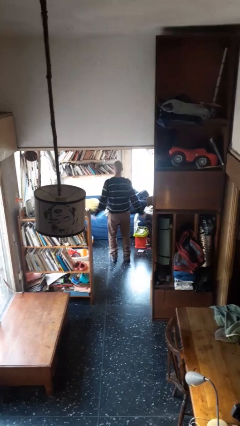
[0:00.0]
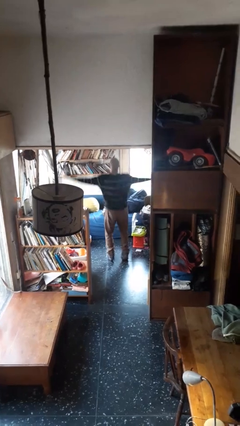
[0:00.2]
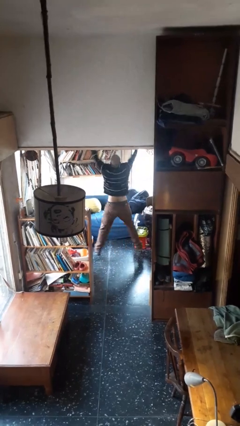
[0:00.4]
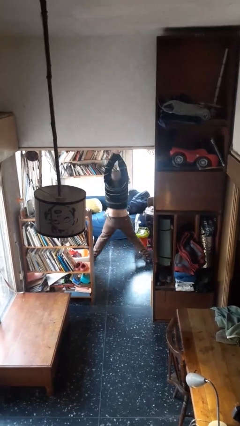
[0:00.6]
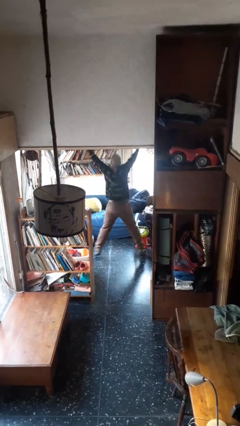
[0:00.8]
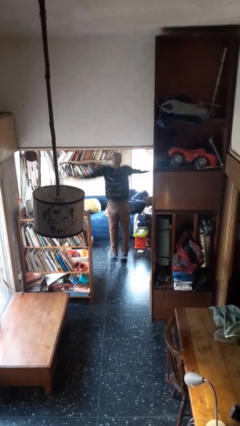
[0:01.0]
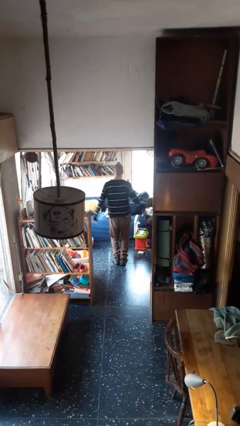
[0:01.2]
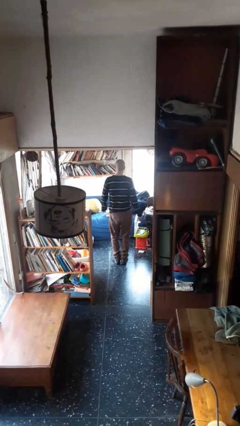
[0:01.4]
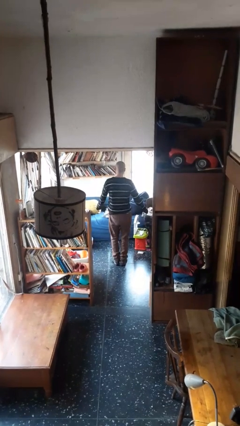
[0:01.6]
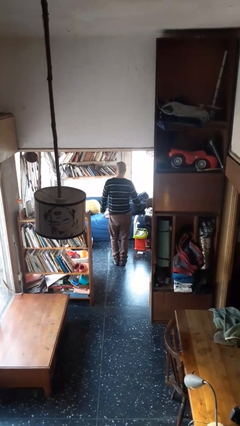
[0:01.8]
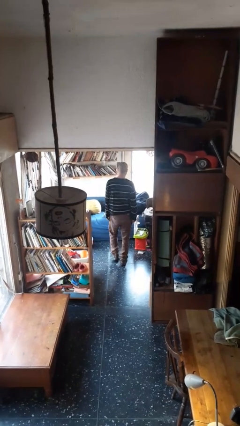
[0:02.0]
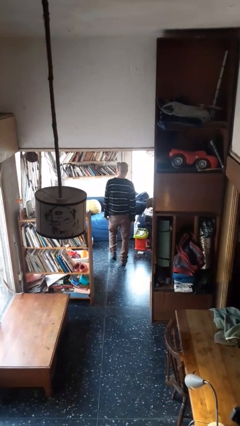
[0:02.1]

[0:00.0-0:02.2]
person exercises with jumping jacks

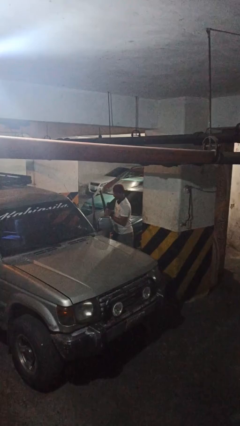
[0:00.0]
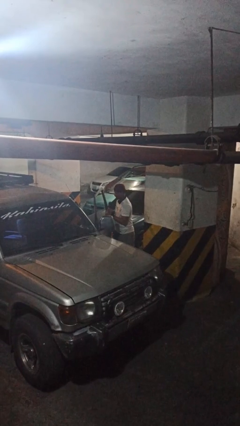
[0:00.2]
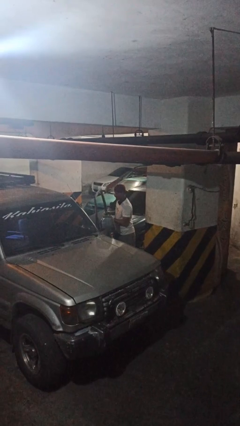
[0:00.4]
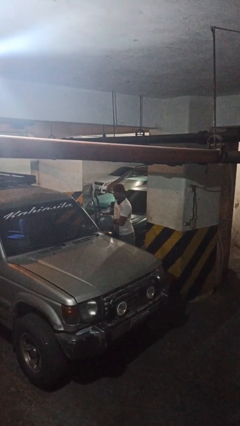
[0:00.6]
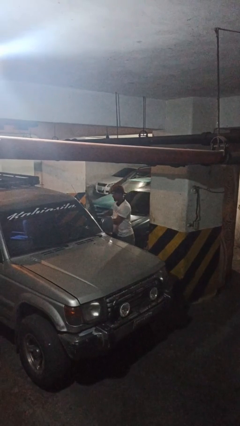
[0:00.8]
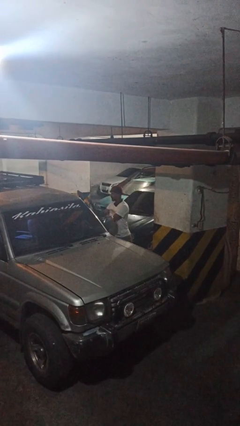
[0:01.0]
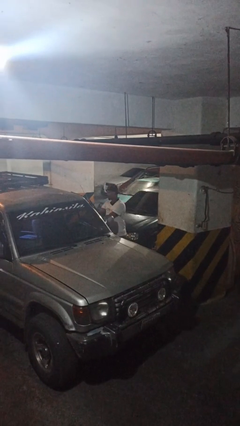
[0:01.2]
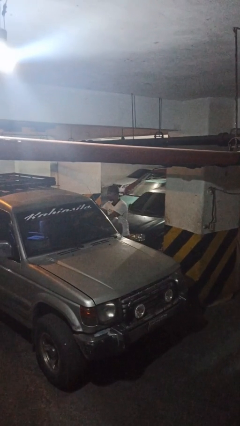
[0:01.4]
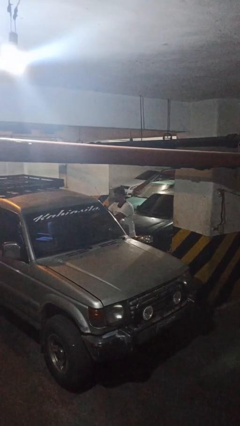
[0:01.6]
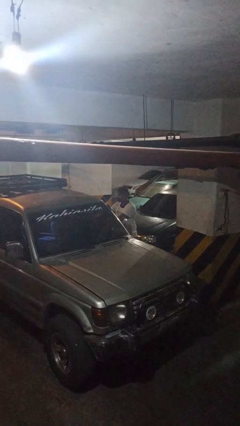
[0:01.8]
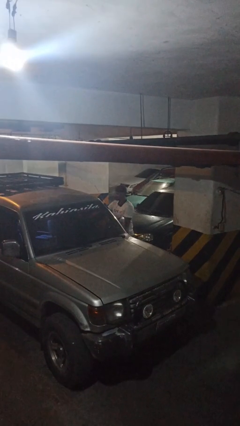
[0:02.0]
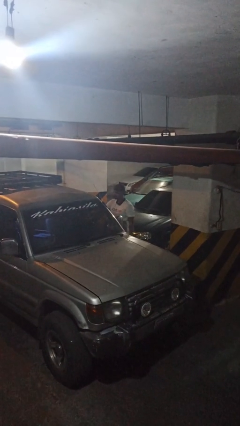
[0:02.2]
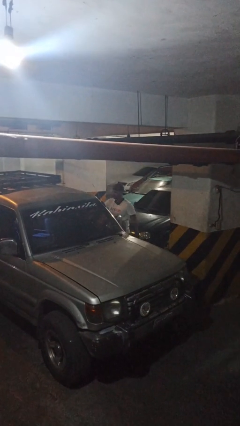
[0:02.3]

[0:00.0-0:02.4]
person closes car door

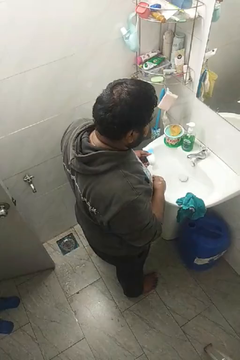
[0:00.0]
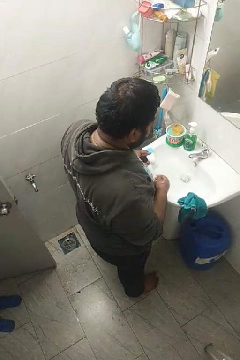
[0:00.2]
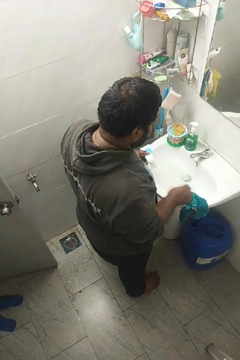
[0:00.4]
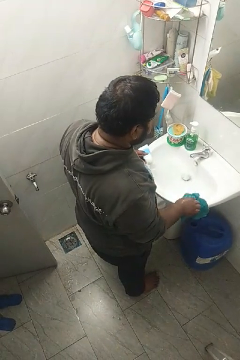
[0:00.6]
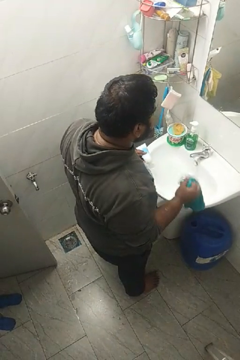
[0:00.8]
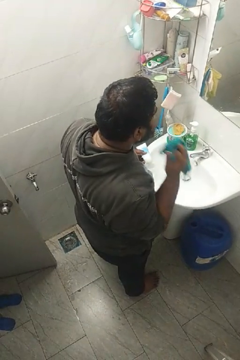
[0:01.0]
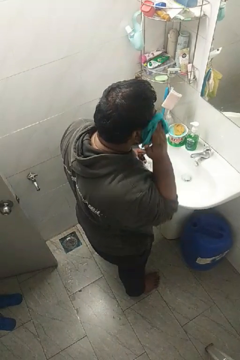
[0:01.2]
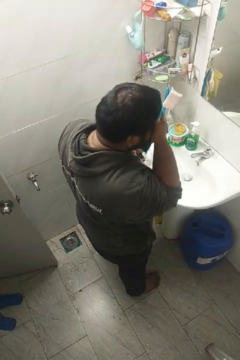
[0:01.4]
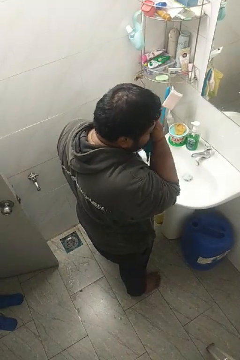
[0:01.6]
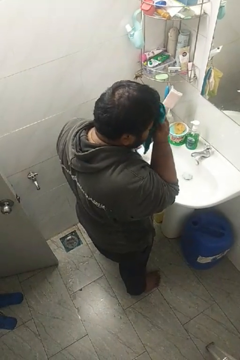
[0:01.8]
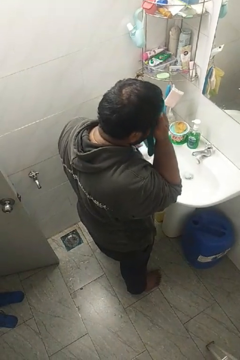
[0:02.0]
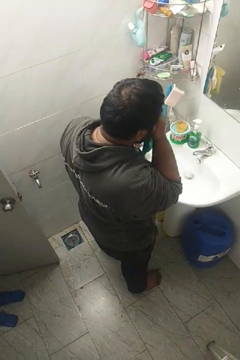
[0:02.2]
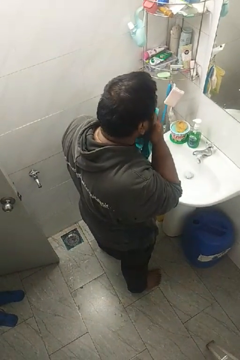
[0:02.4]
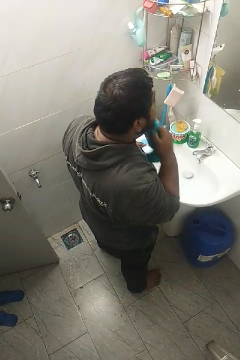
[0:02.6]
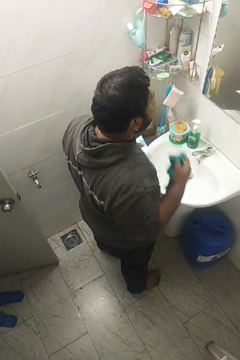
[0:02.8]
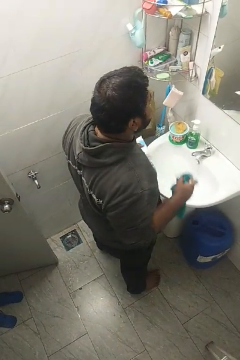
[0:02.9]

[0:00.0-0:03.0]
person dries face with towel

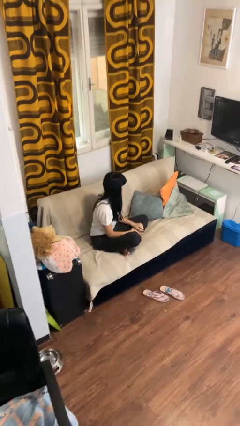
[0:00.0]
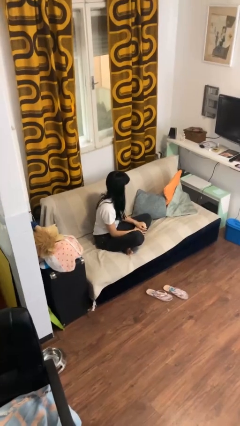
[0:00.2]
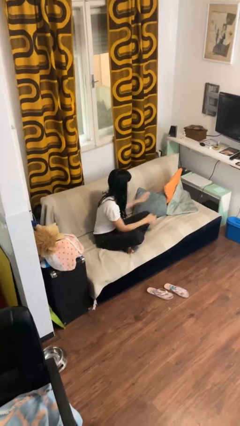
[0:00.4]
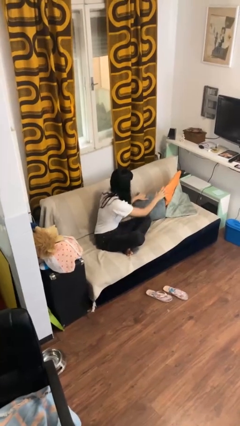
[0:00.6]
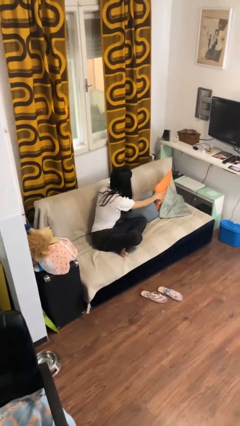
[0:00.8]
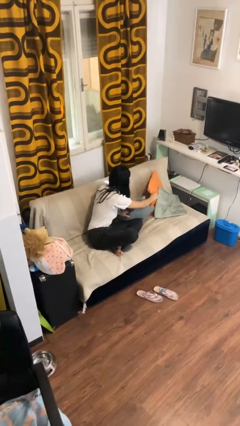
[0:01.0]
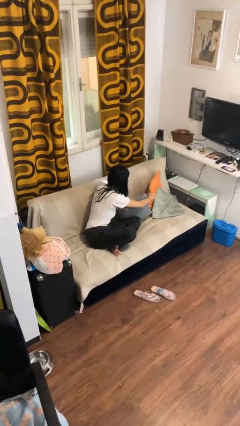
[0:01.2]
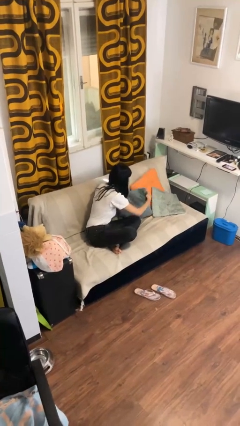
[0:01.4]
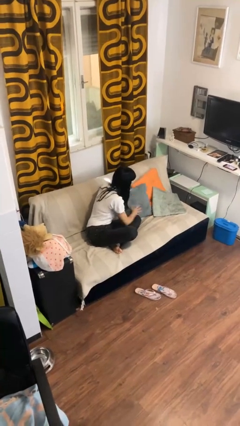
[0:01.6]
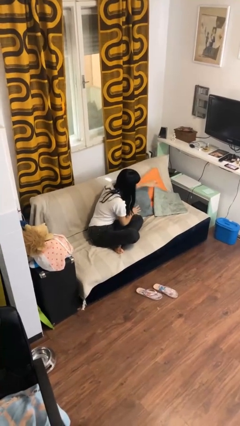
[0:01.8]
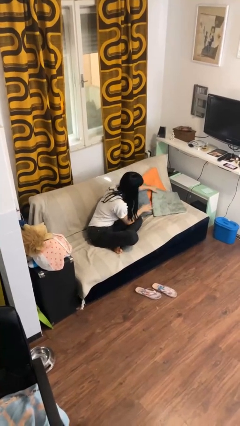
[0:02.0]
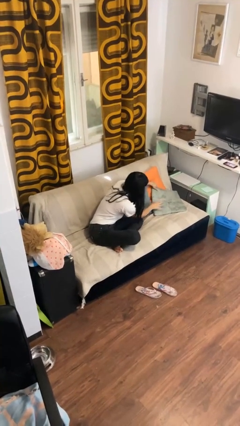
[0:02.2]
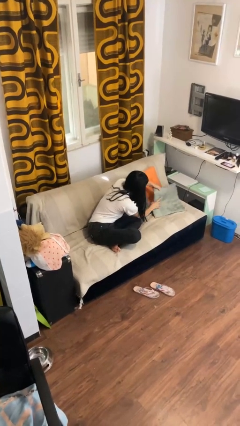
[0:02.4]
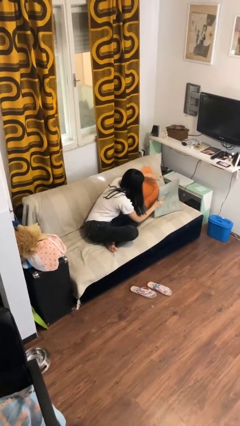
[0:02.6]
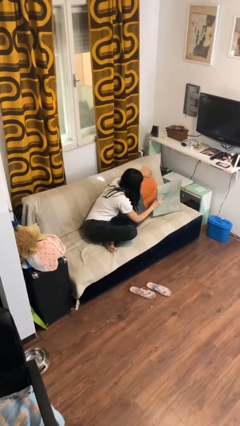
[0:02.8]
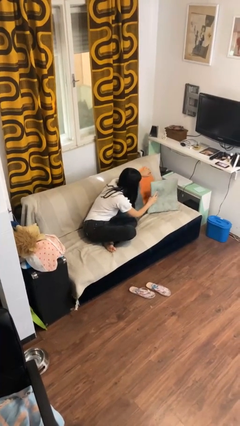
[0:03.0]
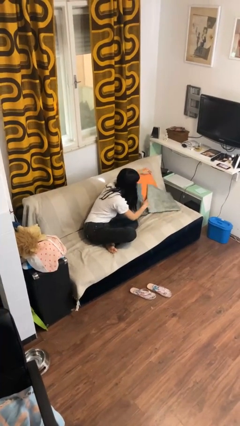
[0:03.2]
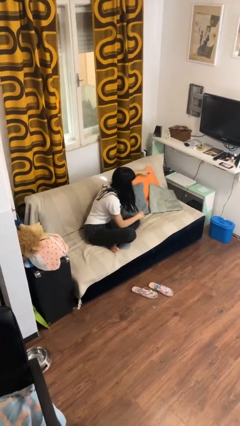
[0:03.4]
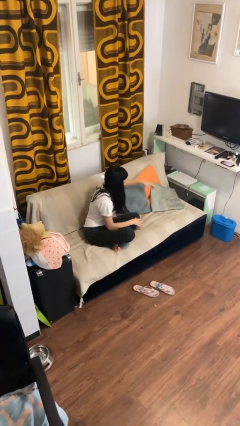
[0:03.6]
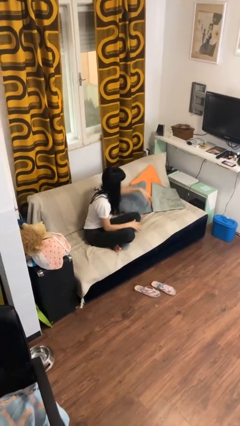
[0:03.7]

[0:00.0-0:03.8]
person searches in couch

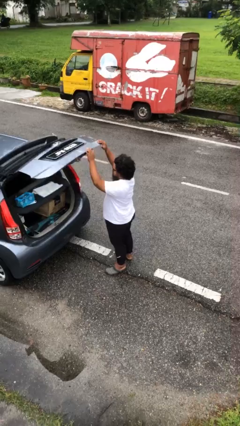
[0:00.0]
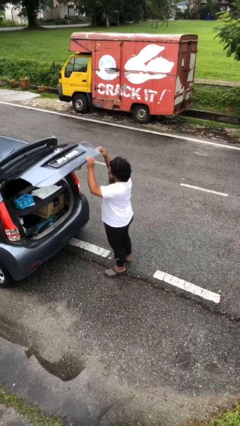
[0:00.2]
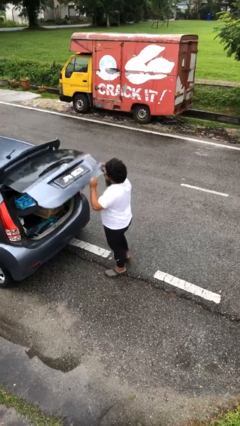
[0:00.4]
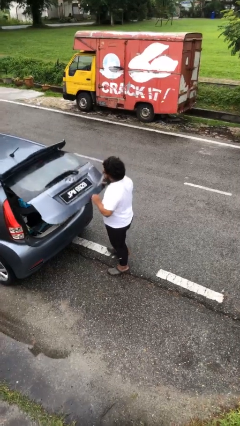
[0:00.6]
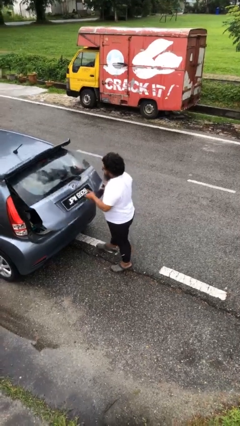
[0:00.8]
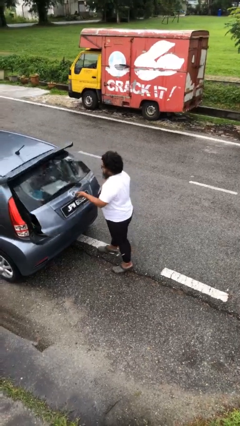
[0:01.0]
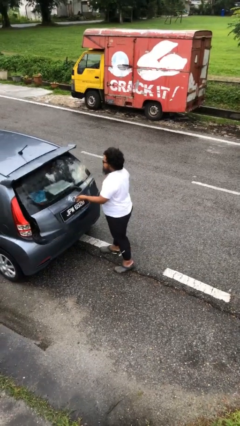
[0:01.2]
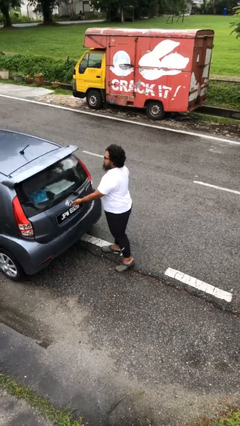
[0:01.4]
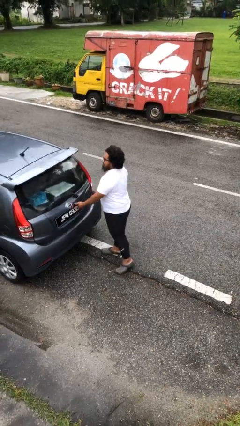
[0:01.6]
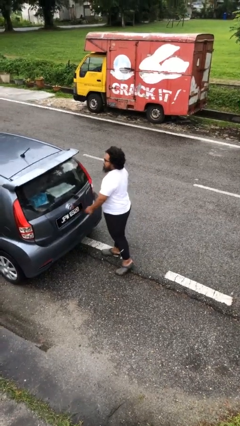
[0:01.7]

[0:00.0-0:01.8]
person closes car trunk

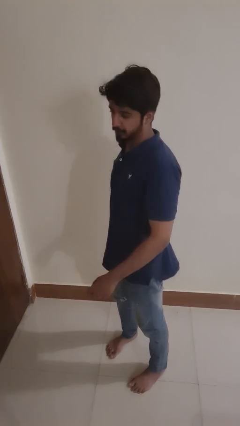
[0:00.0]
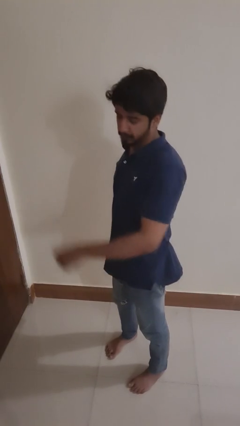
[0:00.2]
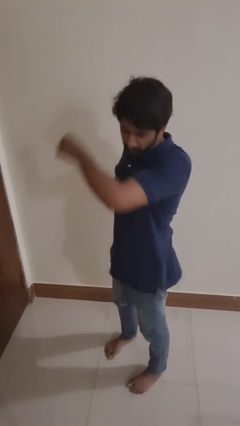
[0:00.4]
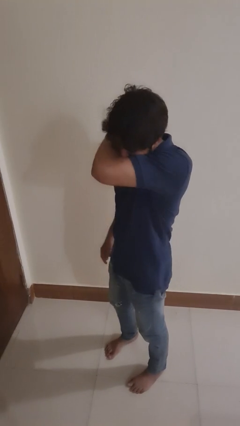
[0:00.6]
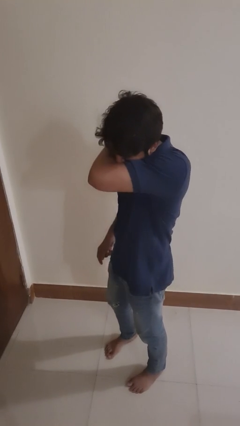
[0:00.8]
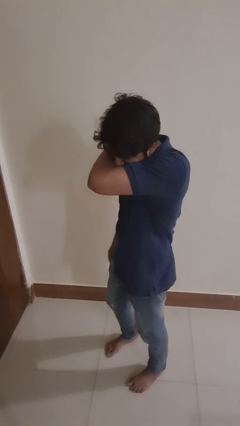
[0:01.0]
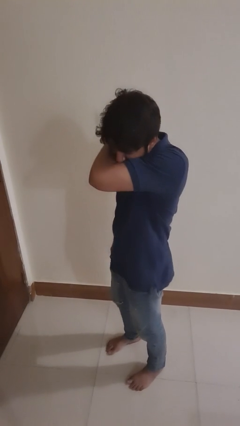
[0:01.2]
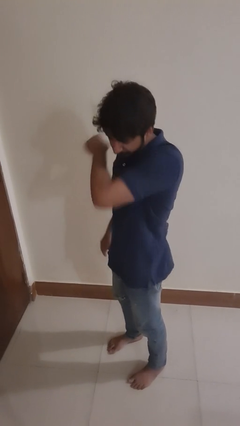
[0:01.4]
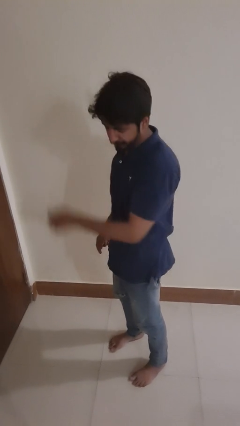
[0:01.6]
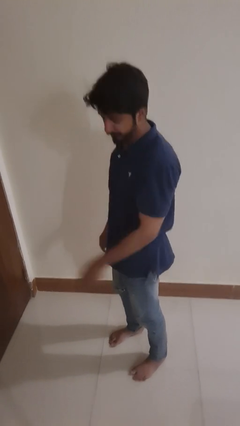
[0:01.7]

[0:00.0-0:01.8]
person sneezes into arm

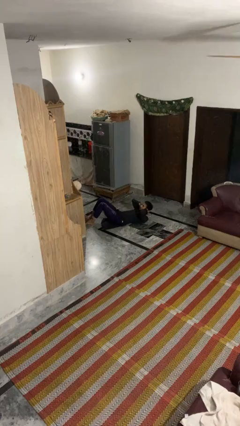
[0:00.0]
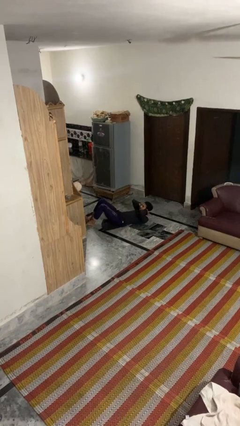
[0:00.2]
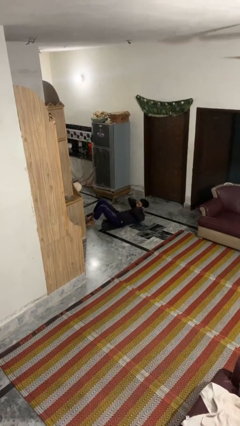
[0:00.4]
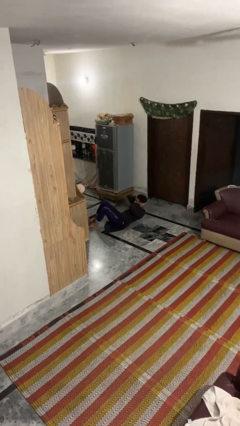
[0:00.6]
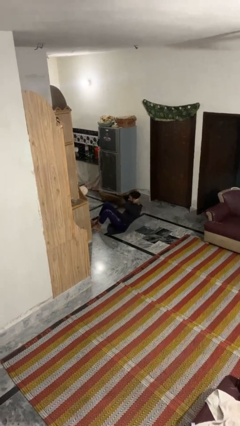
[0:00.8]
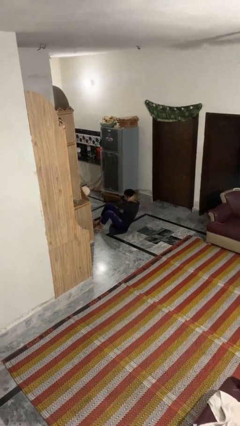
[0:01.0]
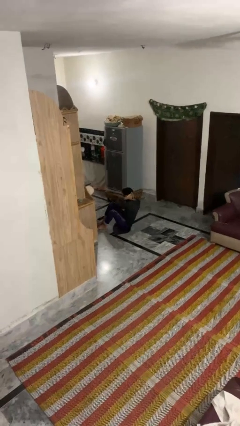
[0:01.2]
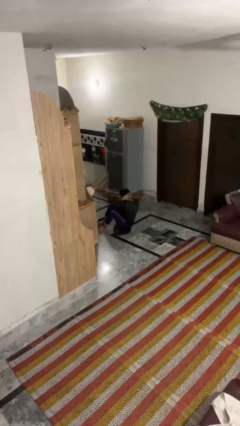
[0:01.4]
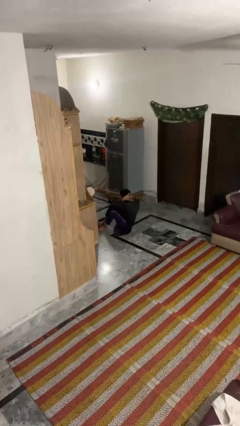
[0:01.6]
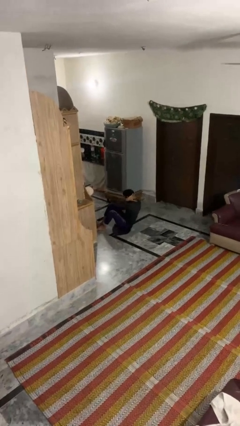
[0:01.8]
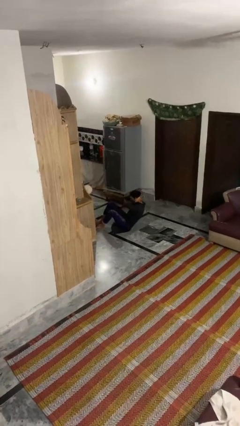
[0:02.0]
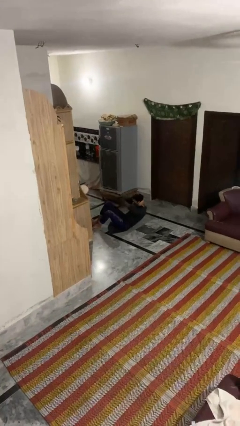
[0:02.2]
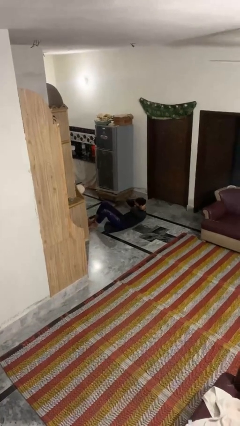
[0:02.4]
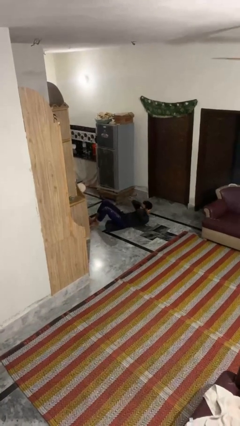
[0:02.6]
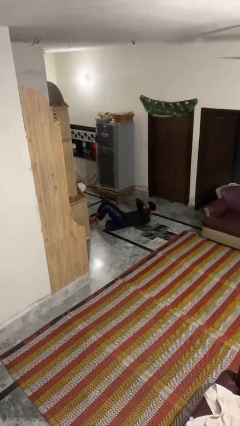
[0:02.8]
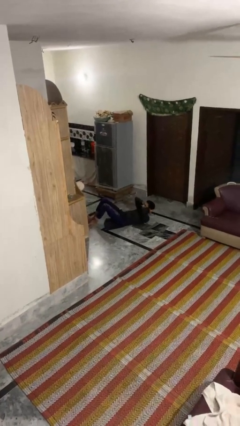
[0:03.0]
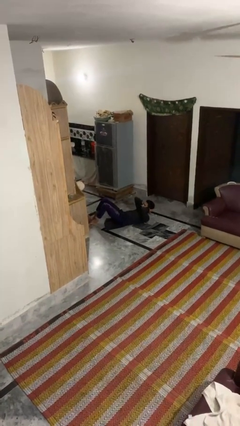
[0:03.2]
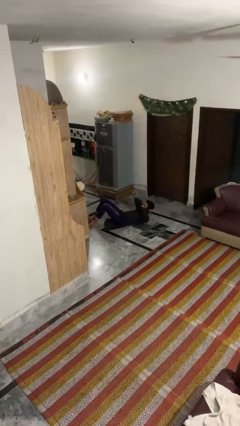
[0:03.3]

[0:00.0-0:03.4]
person exercises with situp
